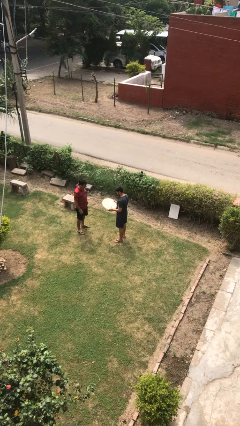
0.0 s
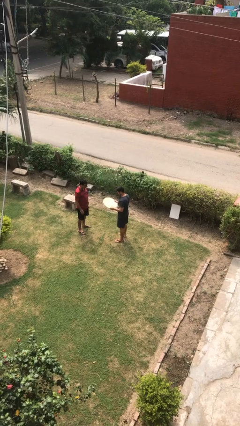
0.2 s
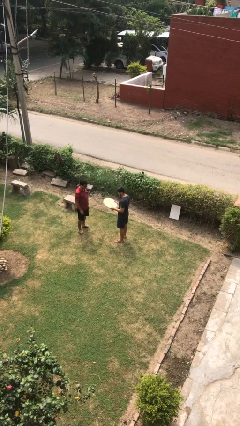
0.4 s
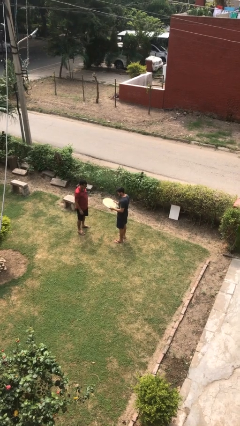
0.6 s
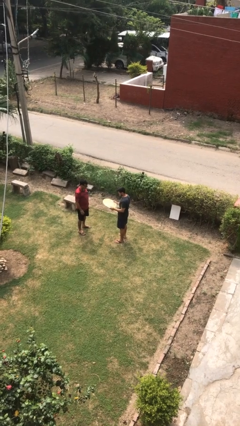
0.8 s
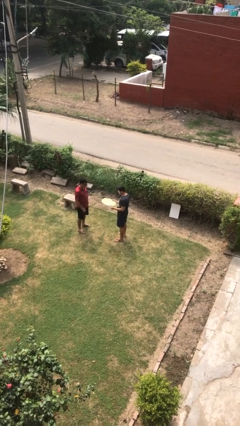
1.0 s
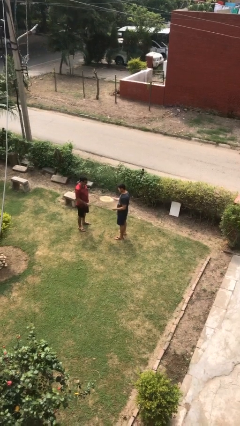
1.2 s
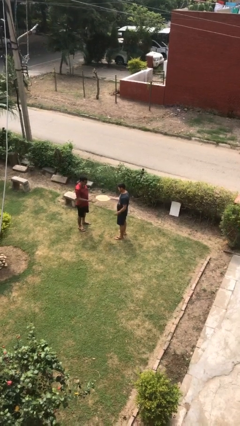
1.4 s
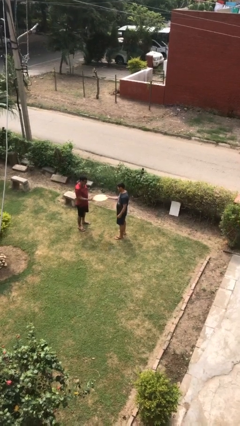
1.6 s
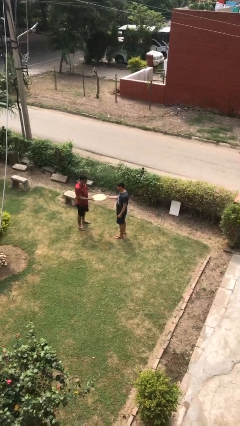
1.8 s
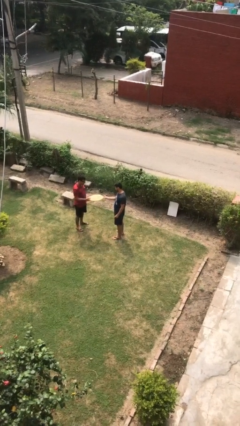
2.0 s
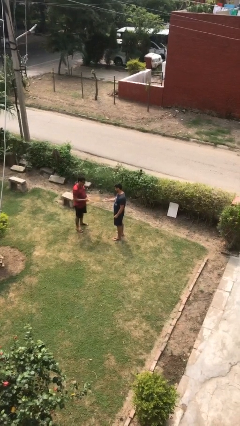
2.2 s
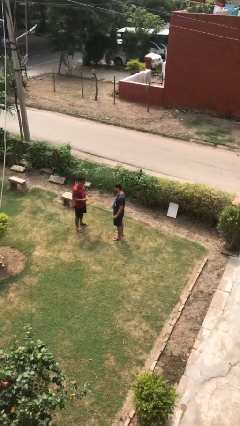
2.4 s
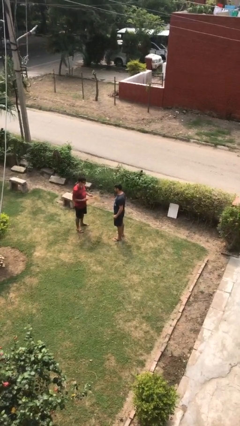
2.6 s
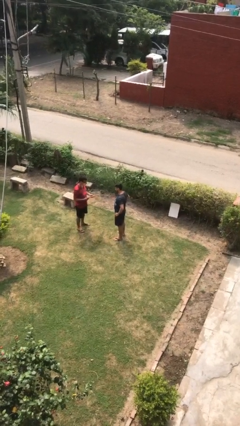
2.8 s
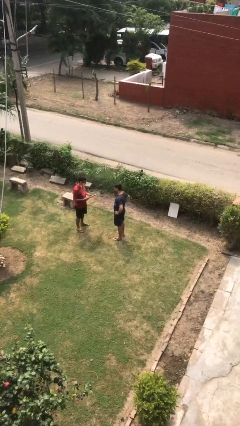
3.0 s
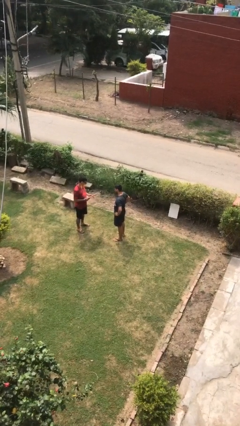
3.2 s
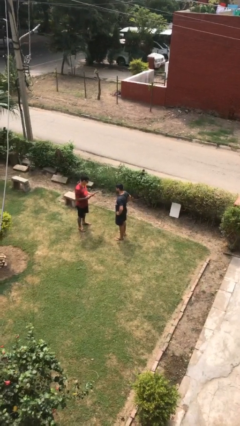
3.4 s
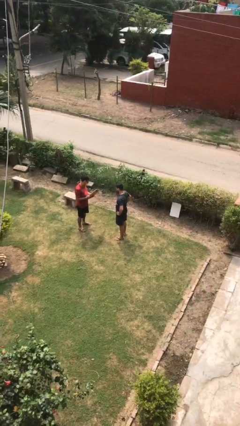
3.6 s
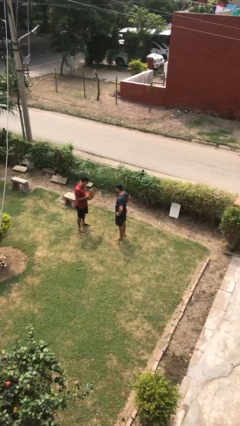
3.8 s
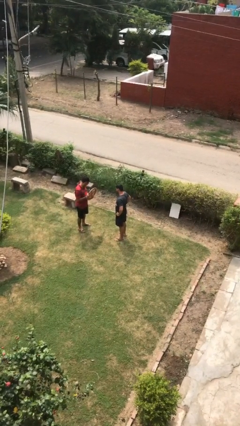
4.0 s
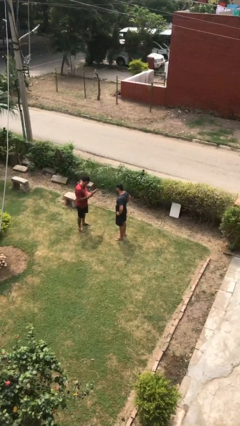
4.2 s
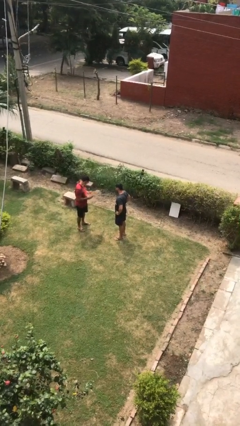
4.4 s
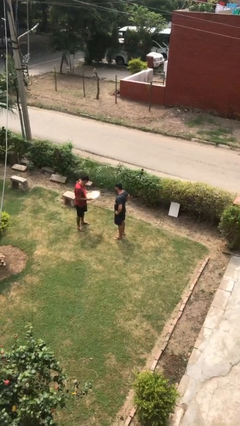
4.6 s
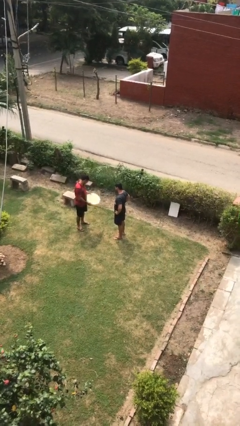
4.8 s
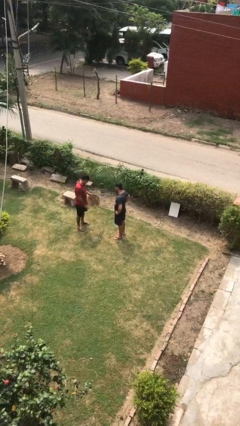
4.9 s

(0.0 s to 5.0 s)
person transfers object to person

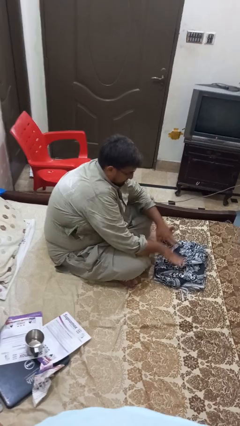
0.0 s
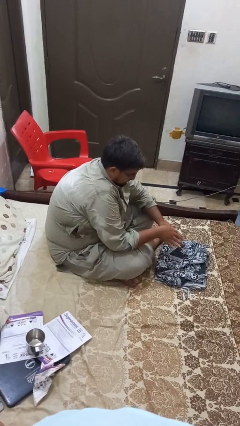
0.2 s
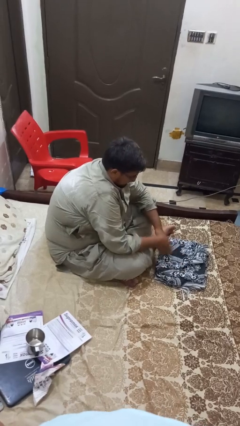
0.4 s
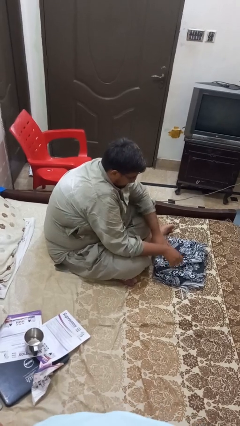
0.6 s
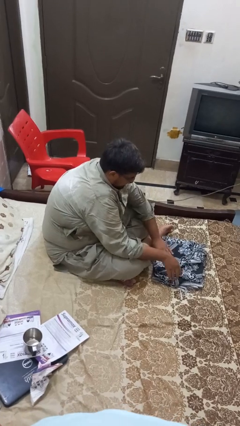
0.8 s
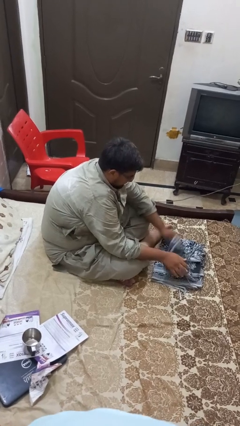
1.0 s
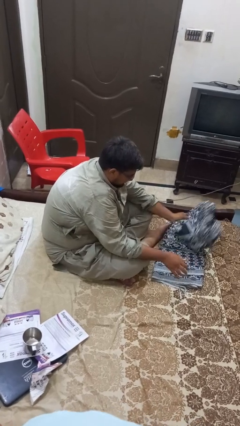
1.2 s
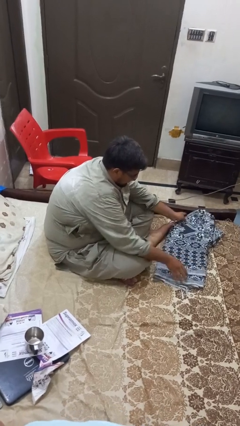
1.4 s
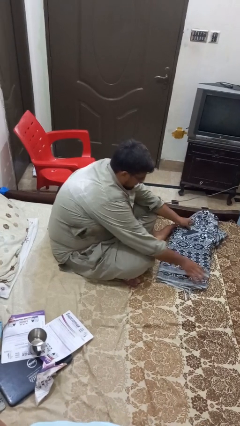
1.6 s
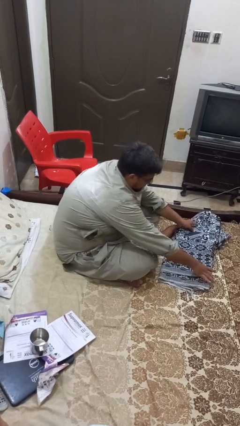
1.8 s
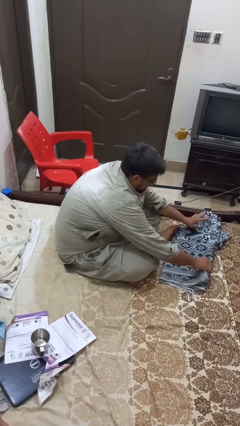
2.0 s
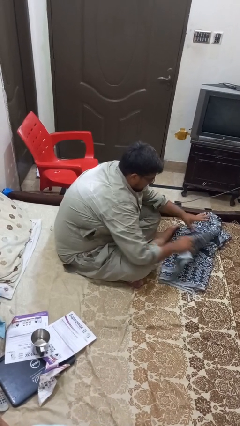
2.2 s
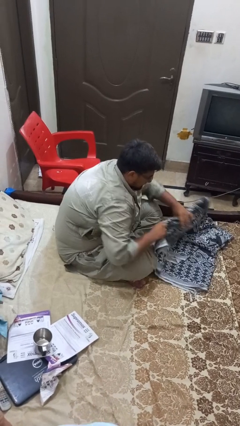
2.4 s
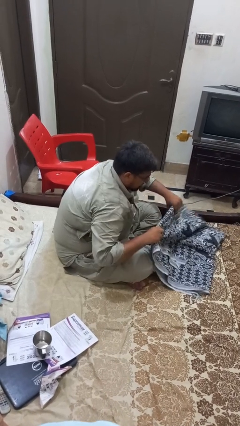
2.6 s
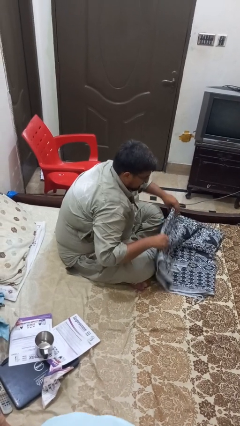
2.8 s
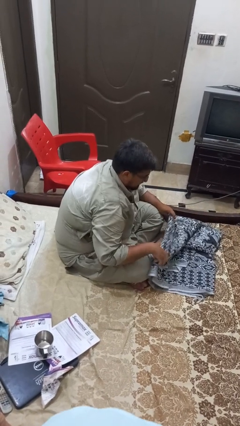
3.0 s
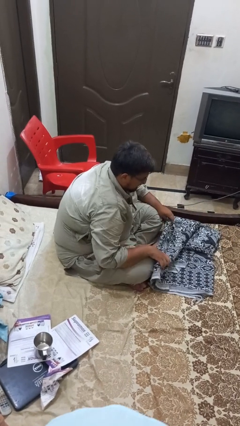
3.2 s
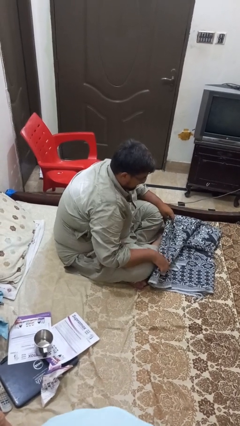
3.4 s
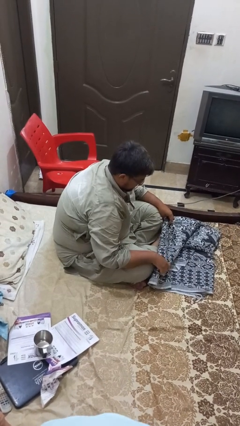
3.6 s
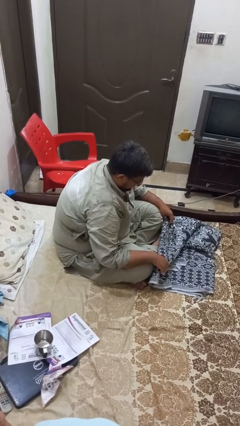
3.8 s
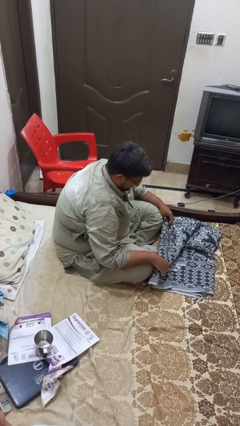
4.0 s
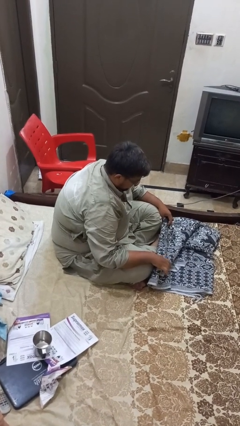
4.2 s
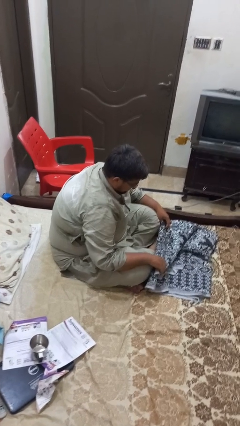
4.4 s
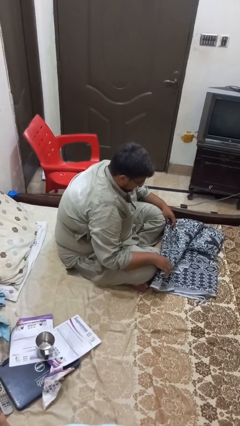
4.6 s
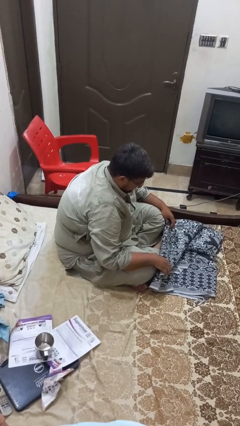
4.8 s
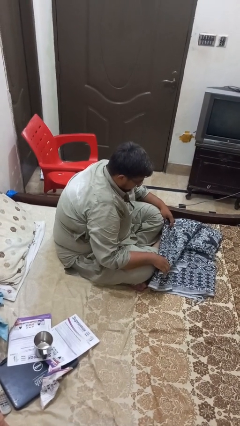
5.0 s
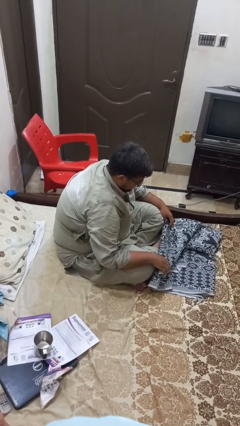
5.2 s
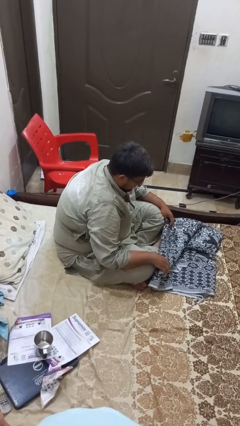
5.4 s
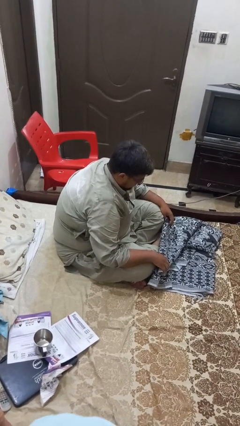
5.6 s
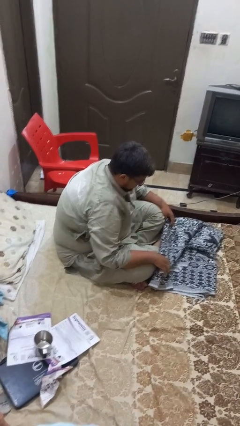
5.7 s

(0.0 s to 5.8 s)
person unfolds blanket

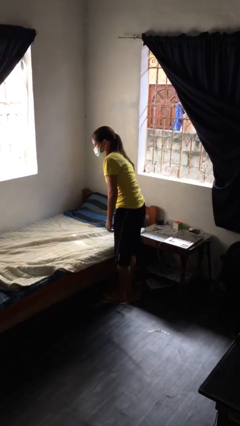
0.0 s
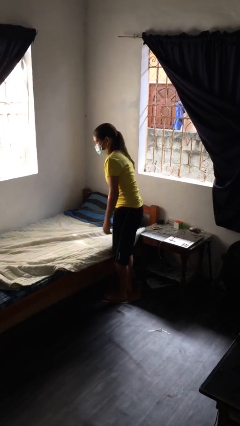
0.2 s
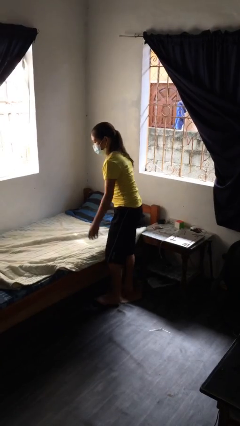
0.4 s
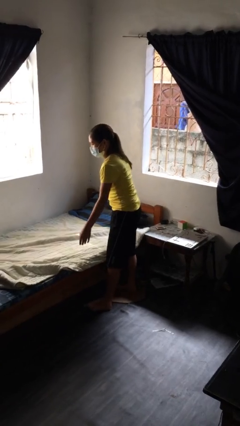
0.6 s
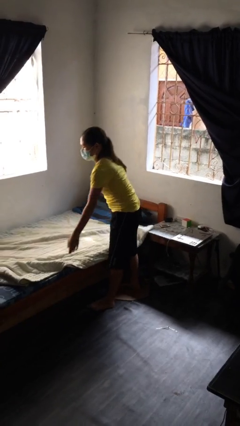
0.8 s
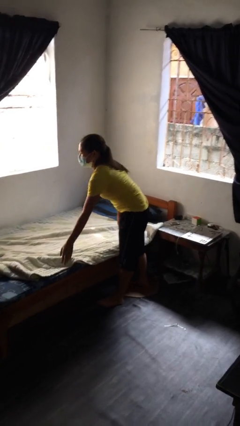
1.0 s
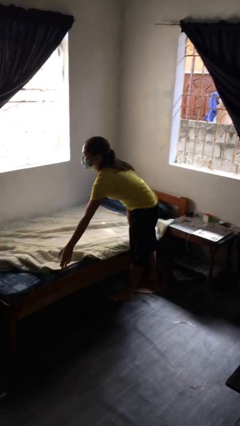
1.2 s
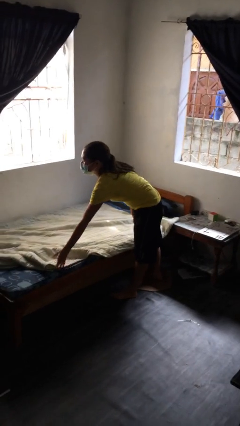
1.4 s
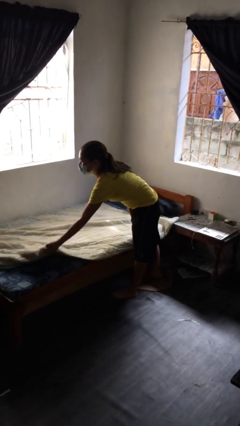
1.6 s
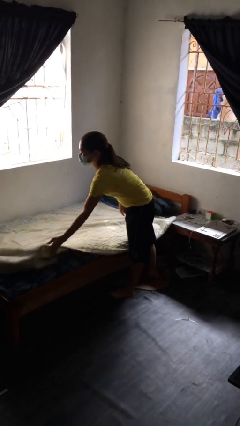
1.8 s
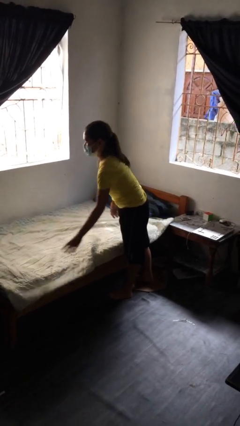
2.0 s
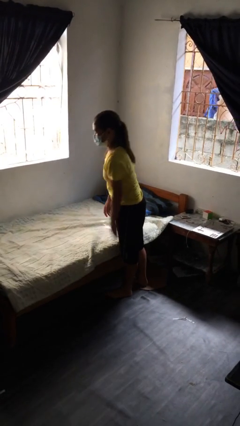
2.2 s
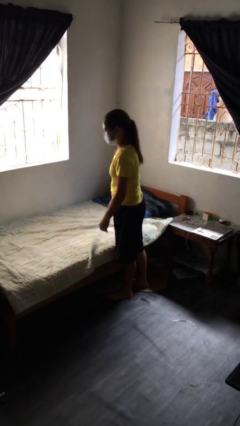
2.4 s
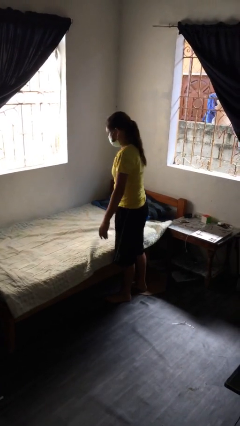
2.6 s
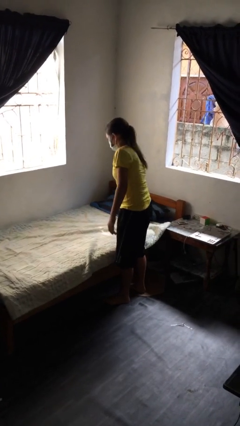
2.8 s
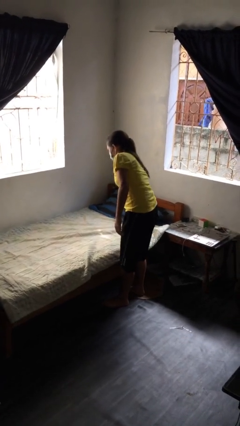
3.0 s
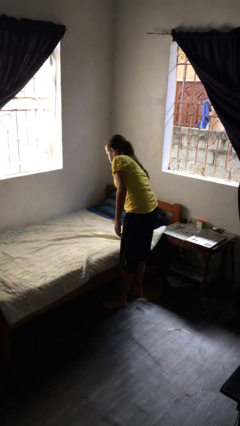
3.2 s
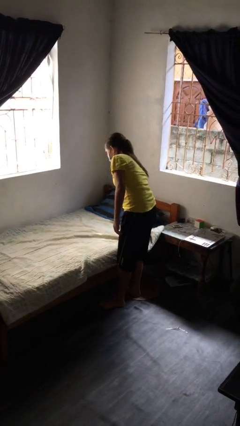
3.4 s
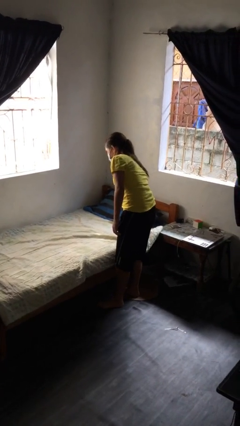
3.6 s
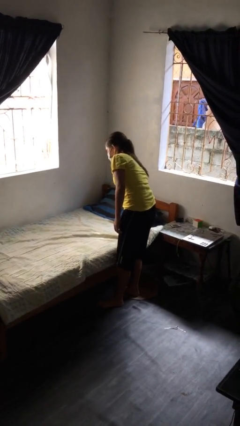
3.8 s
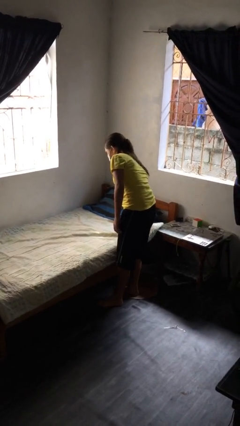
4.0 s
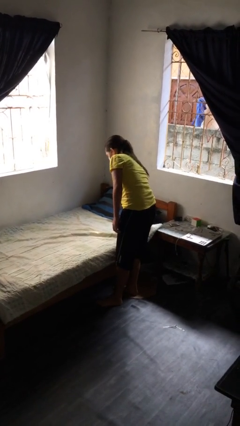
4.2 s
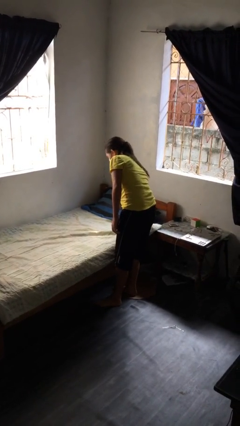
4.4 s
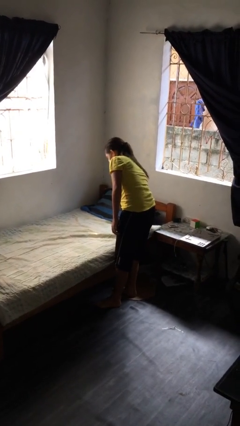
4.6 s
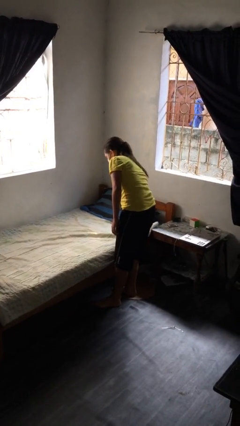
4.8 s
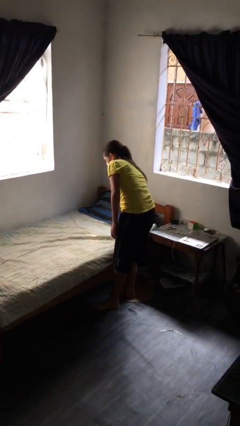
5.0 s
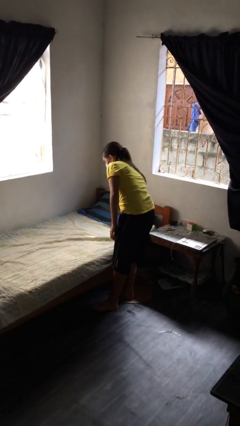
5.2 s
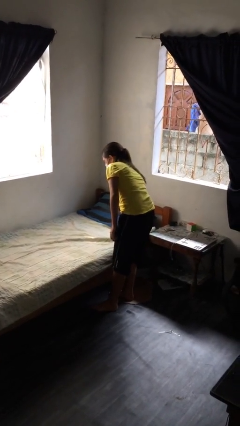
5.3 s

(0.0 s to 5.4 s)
person makes bed

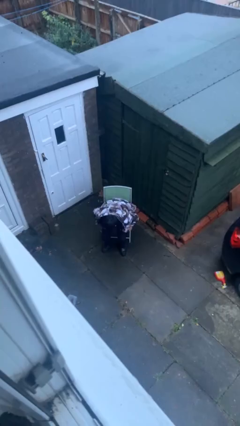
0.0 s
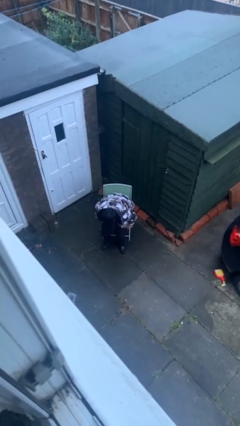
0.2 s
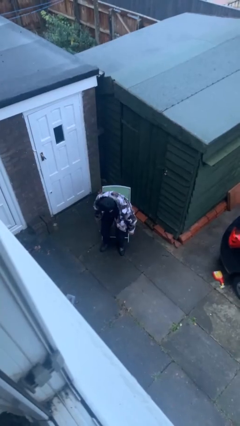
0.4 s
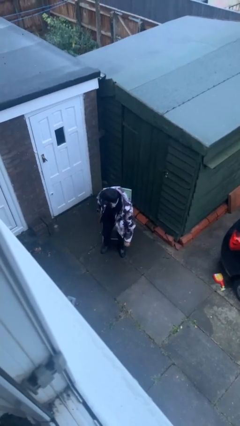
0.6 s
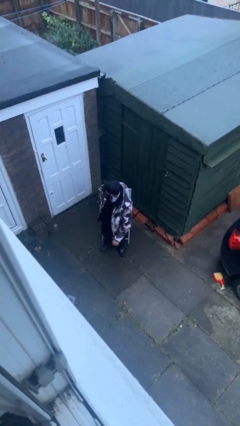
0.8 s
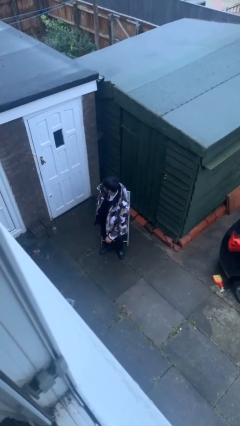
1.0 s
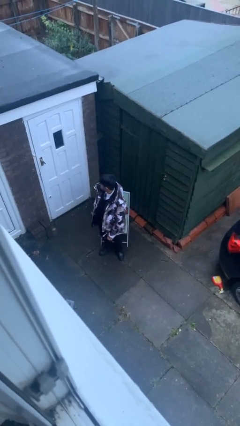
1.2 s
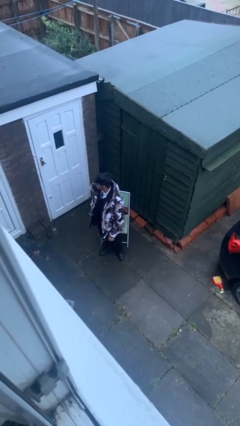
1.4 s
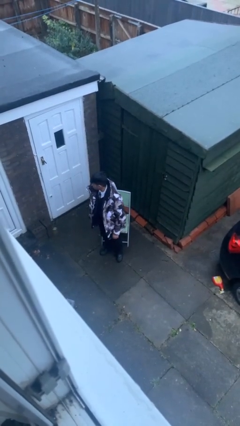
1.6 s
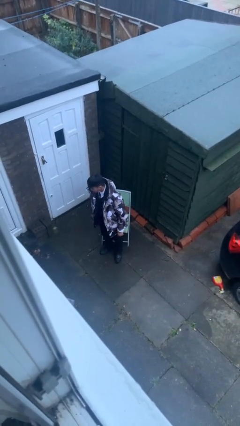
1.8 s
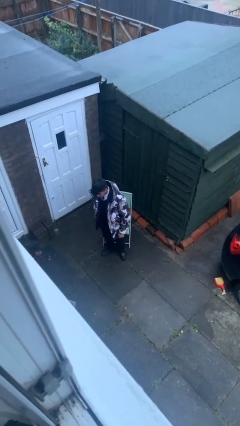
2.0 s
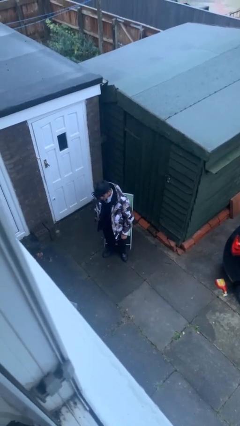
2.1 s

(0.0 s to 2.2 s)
person stands up
